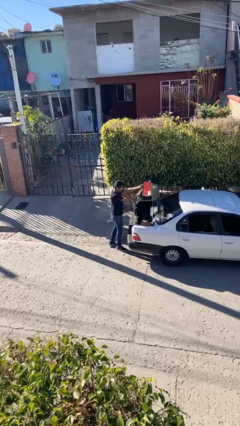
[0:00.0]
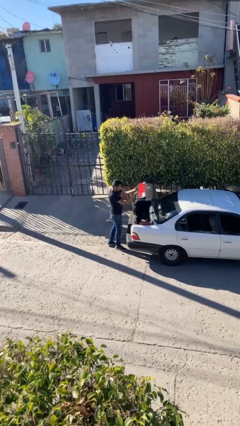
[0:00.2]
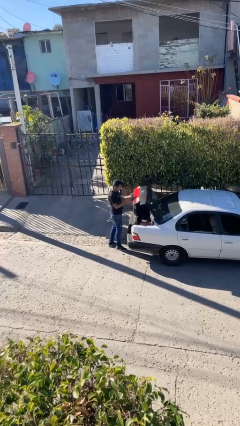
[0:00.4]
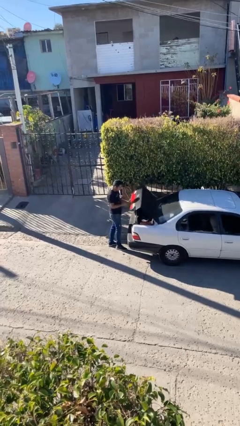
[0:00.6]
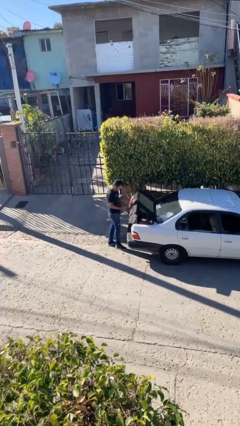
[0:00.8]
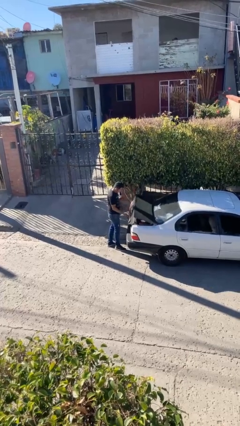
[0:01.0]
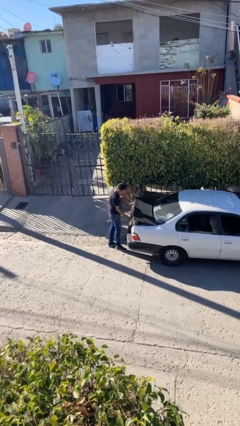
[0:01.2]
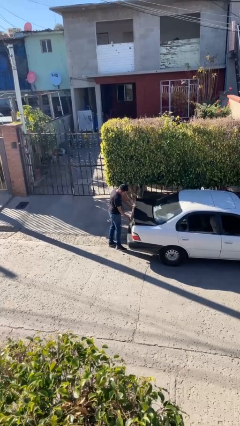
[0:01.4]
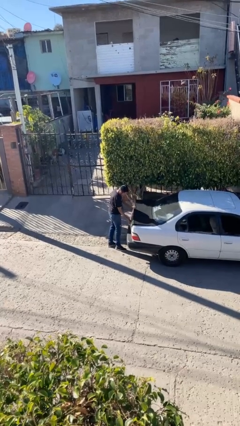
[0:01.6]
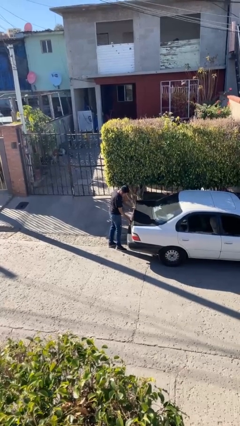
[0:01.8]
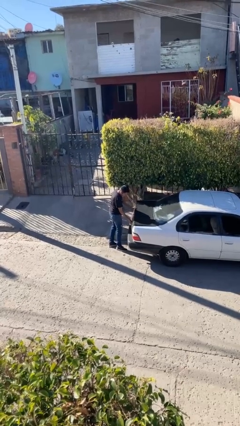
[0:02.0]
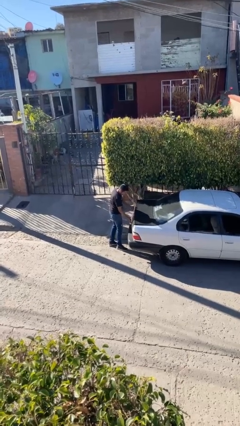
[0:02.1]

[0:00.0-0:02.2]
person closes car trunk

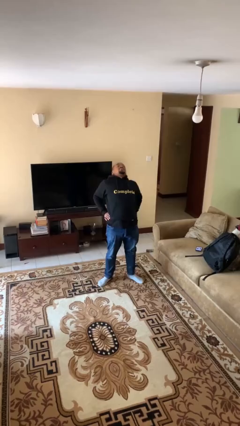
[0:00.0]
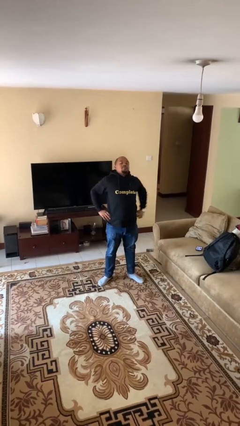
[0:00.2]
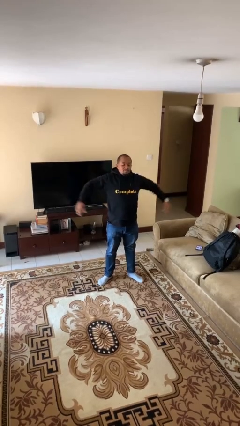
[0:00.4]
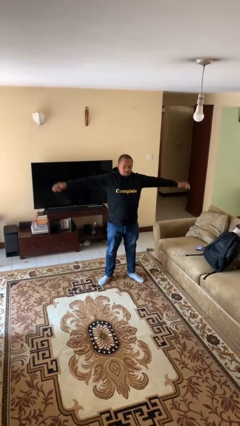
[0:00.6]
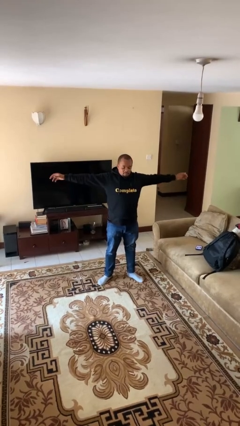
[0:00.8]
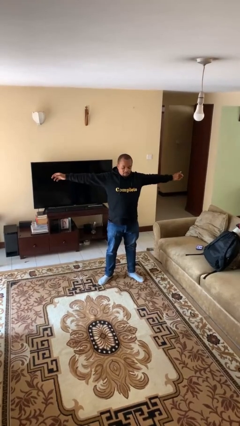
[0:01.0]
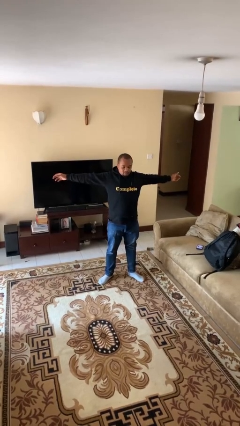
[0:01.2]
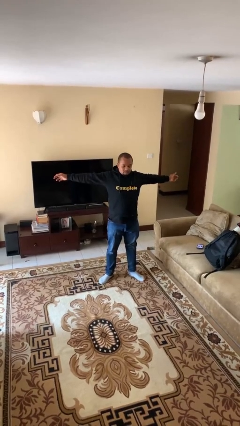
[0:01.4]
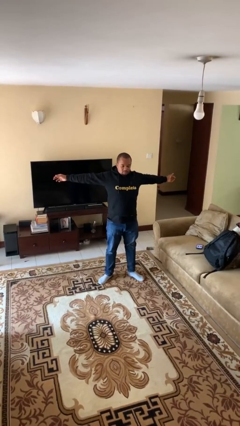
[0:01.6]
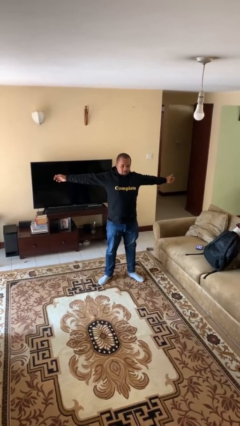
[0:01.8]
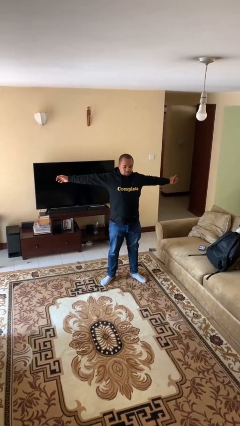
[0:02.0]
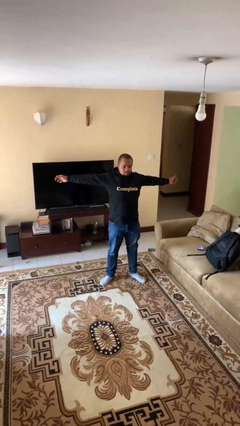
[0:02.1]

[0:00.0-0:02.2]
person stretches arms to side

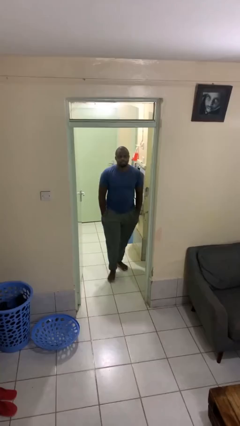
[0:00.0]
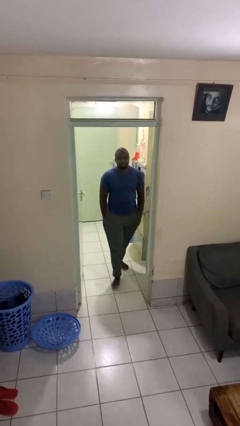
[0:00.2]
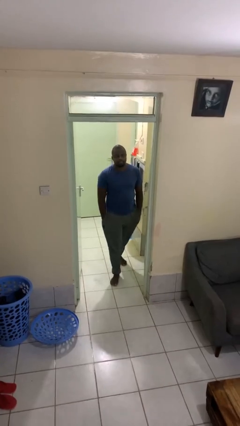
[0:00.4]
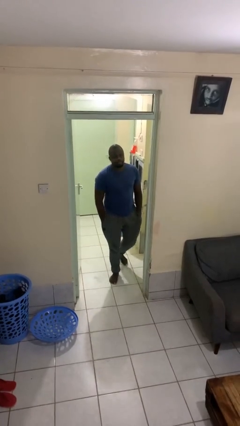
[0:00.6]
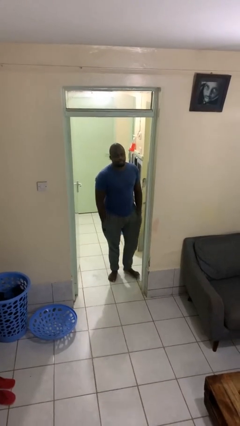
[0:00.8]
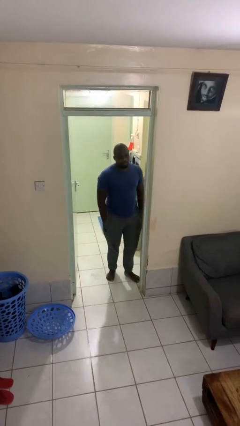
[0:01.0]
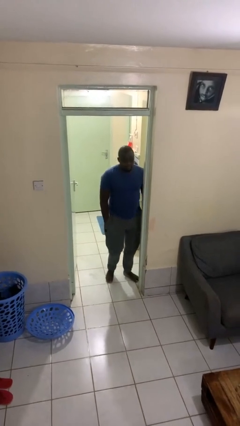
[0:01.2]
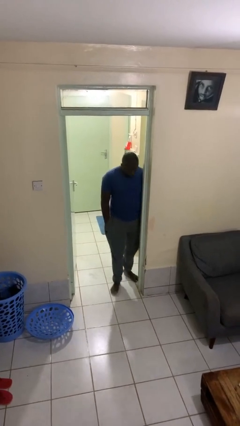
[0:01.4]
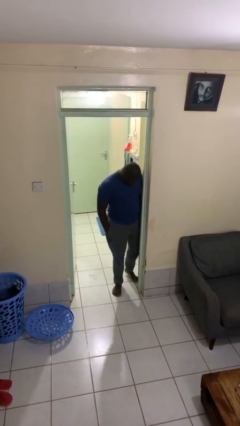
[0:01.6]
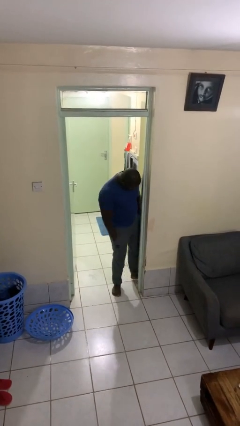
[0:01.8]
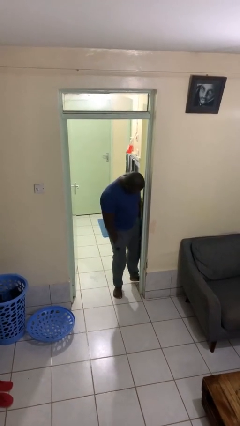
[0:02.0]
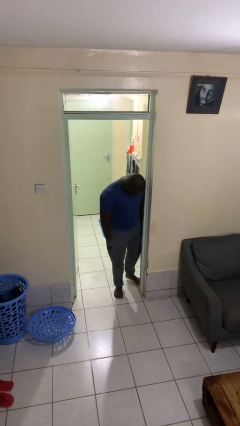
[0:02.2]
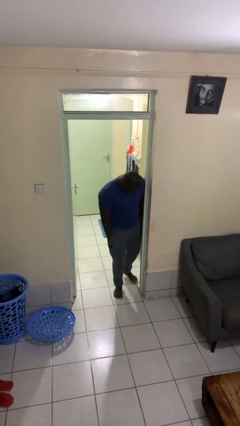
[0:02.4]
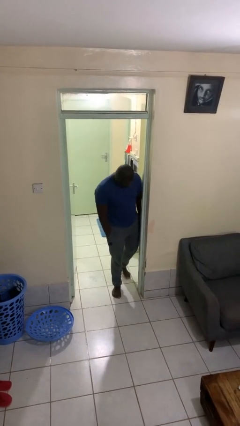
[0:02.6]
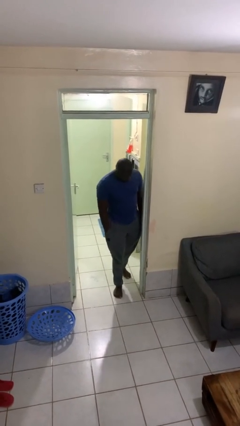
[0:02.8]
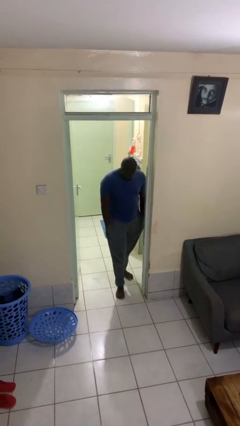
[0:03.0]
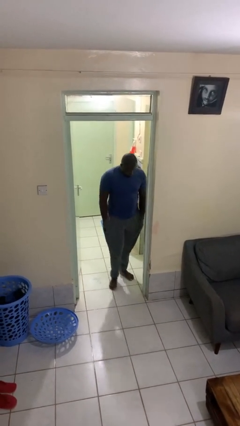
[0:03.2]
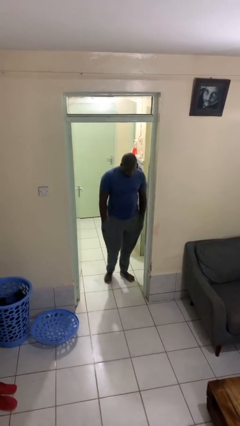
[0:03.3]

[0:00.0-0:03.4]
person bumps into wall

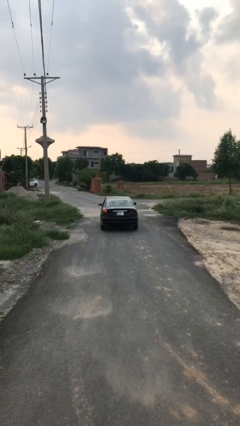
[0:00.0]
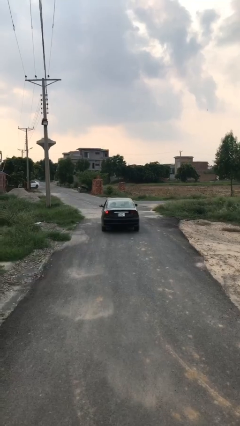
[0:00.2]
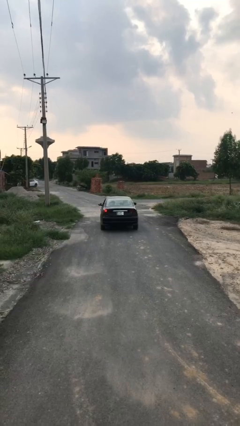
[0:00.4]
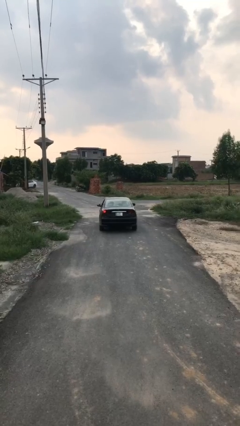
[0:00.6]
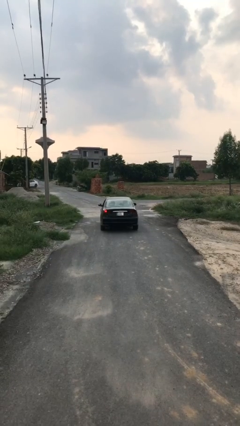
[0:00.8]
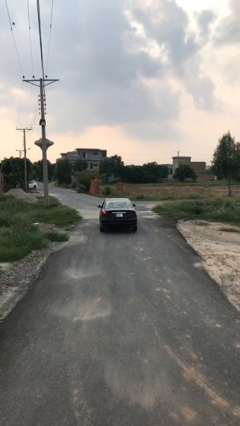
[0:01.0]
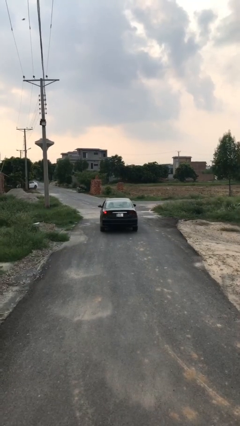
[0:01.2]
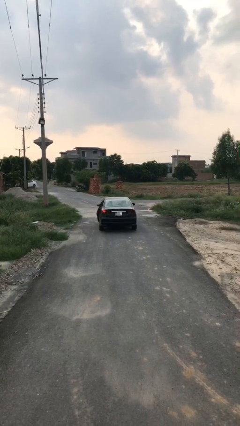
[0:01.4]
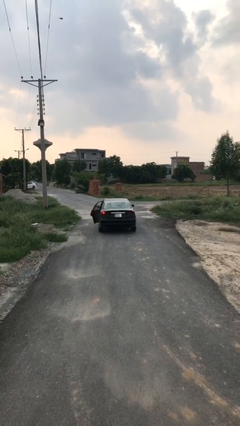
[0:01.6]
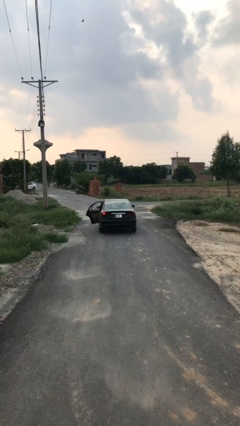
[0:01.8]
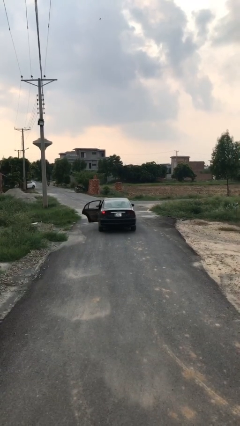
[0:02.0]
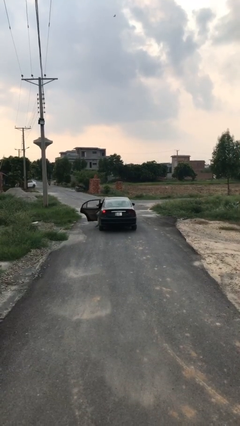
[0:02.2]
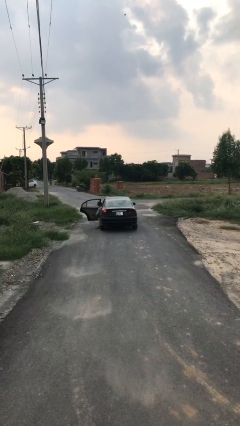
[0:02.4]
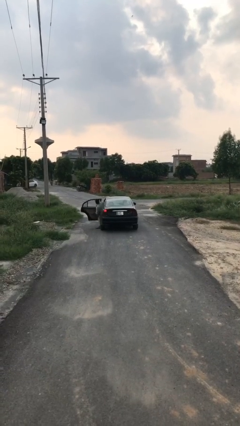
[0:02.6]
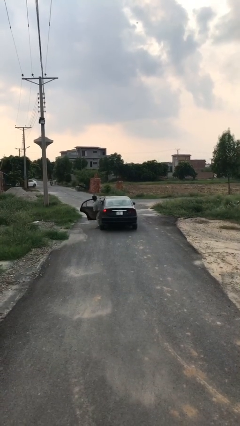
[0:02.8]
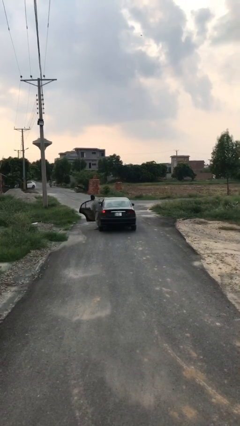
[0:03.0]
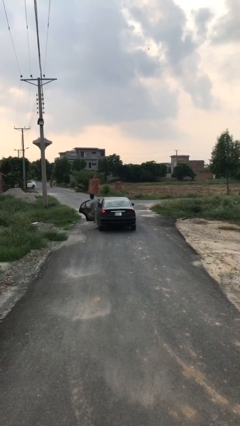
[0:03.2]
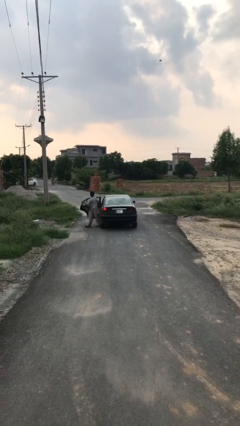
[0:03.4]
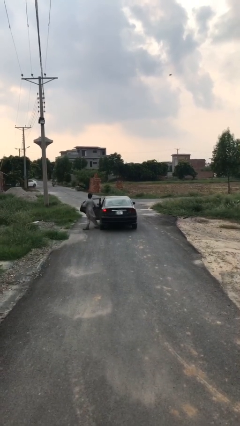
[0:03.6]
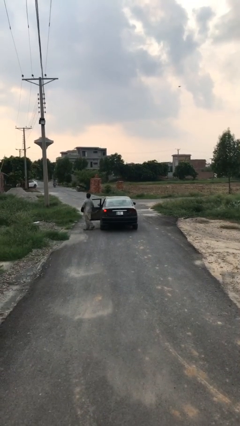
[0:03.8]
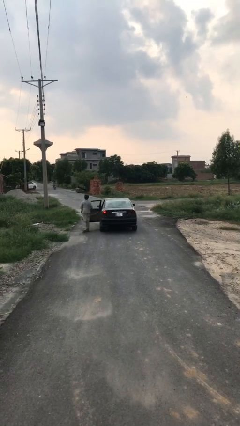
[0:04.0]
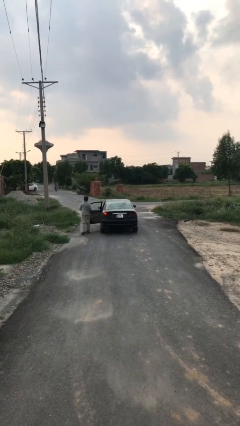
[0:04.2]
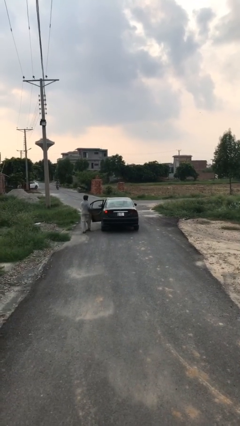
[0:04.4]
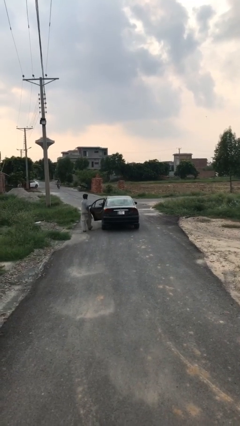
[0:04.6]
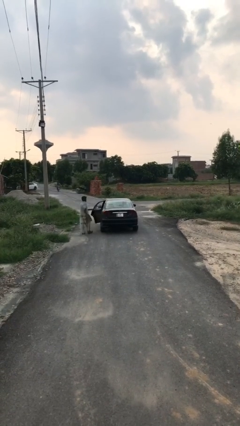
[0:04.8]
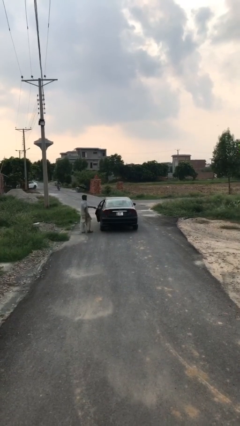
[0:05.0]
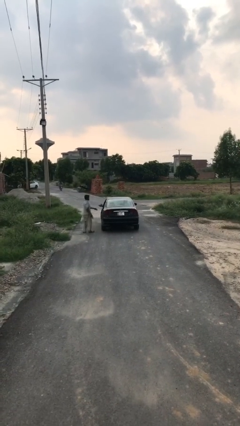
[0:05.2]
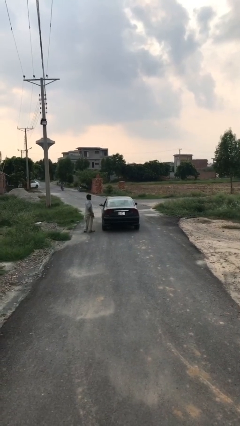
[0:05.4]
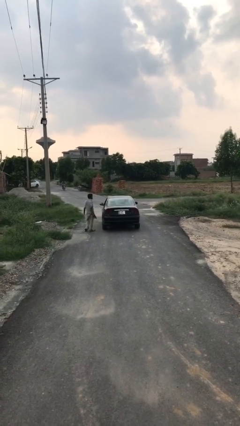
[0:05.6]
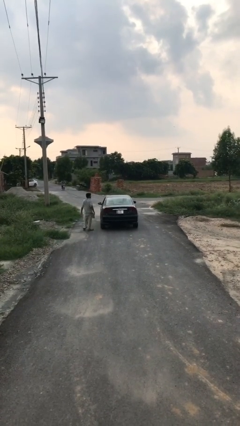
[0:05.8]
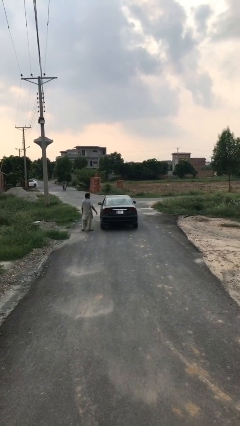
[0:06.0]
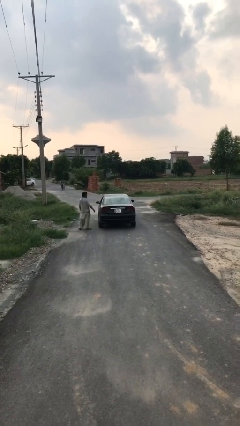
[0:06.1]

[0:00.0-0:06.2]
car drops off person

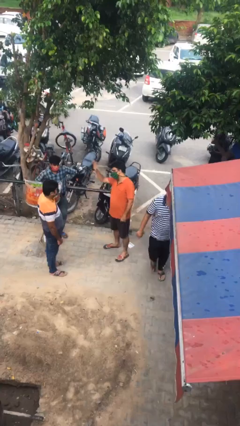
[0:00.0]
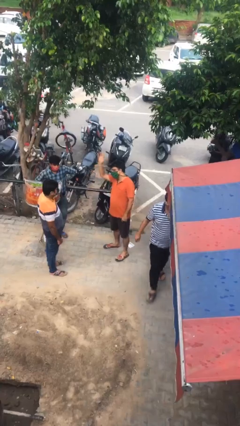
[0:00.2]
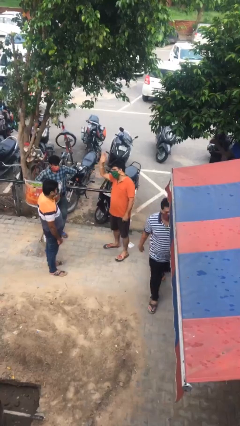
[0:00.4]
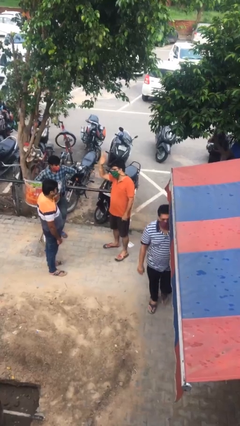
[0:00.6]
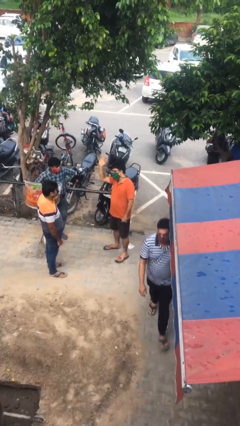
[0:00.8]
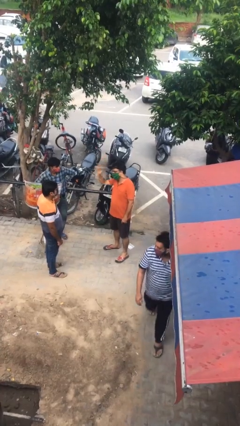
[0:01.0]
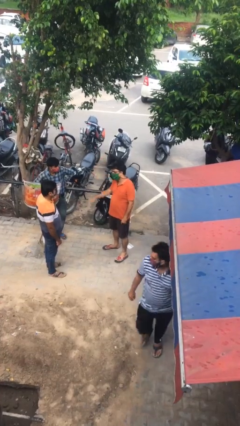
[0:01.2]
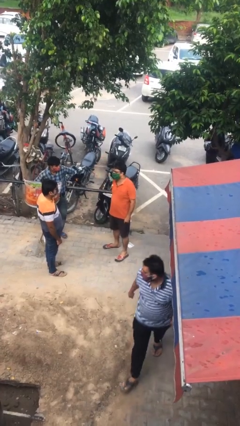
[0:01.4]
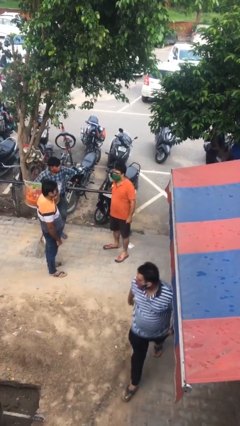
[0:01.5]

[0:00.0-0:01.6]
person waves at person

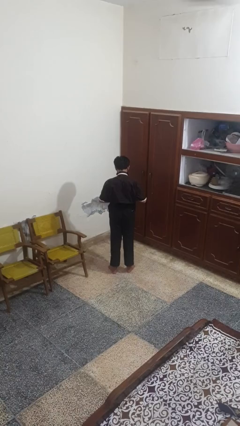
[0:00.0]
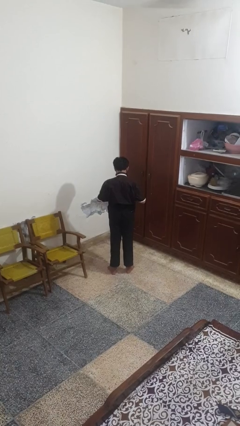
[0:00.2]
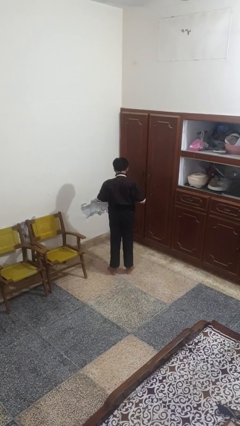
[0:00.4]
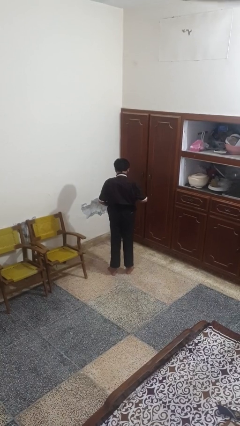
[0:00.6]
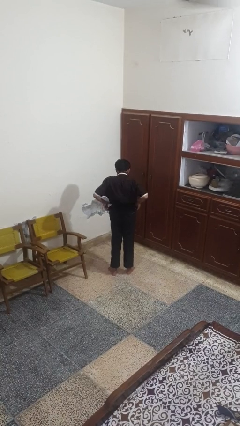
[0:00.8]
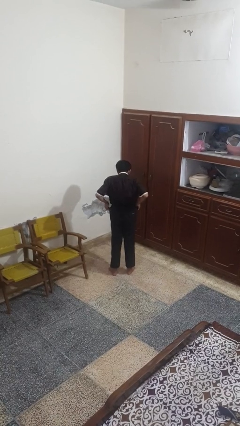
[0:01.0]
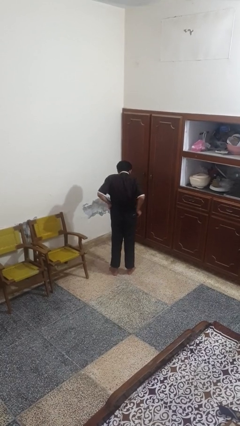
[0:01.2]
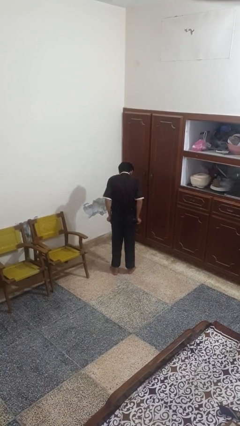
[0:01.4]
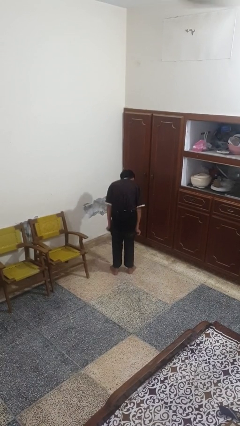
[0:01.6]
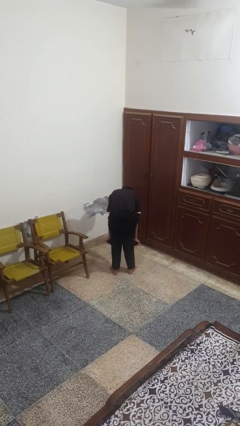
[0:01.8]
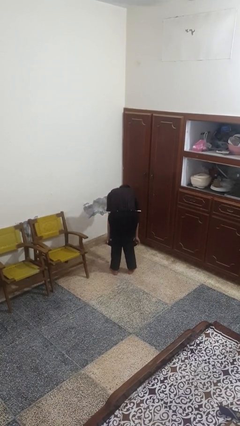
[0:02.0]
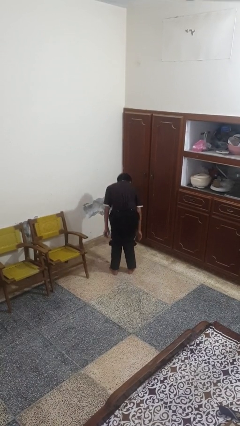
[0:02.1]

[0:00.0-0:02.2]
person takes off pants
